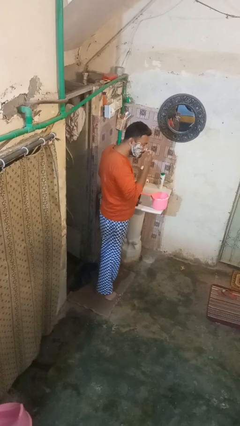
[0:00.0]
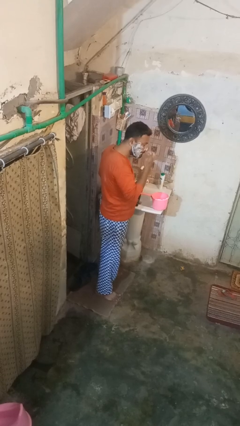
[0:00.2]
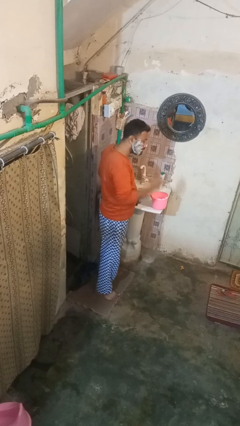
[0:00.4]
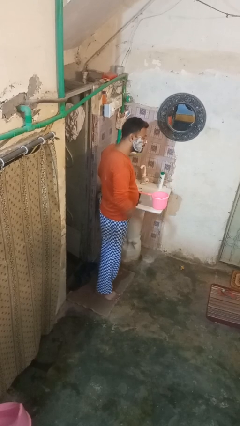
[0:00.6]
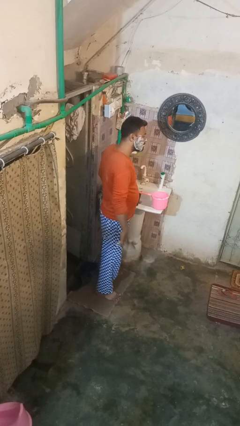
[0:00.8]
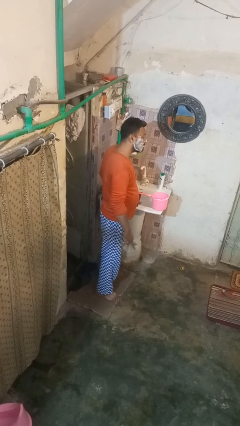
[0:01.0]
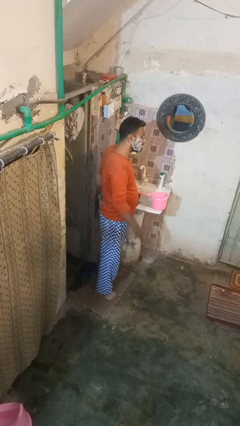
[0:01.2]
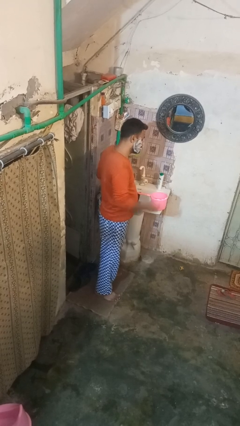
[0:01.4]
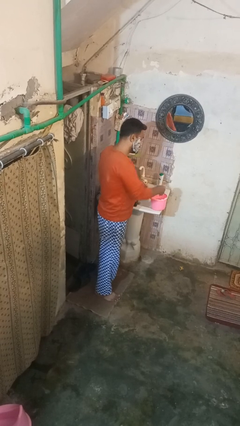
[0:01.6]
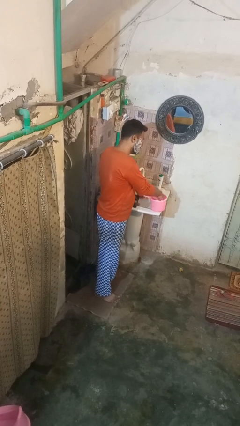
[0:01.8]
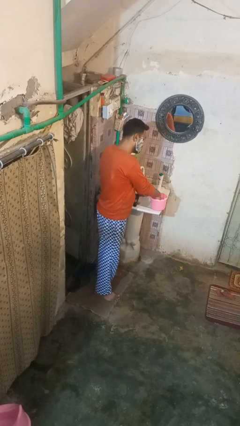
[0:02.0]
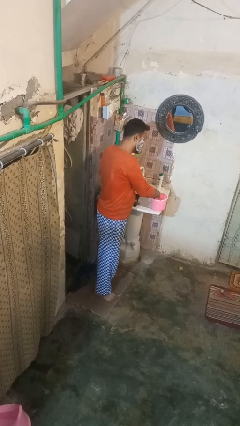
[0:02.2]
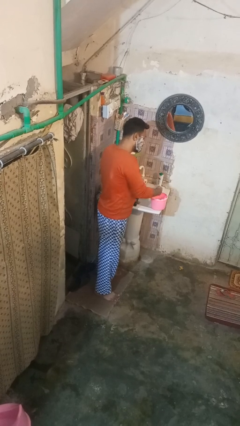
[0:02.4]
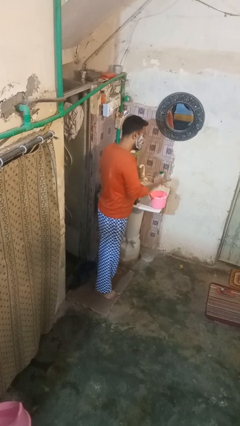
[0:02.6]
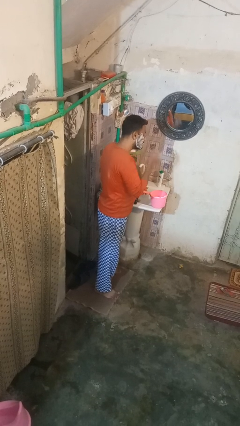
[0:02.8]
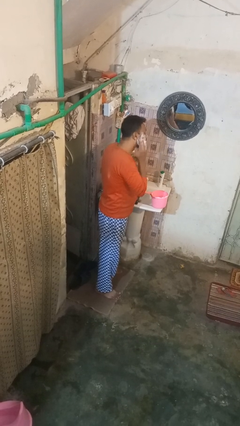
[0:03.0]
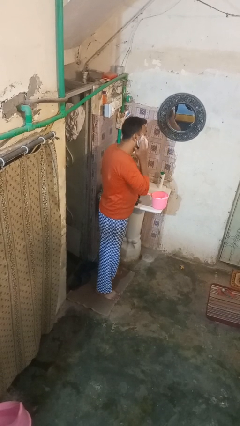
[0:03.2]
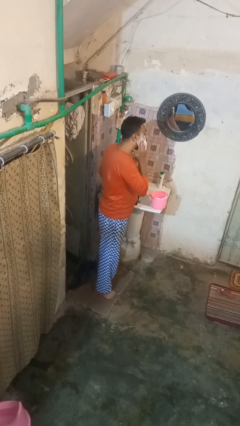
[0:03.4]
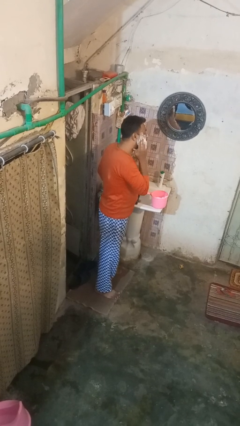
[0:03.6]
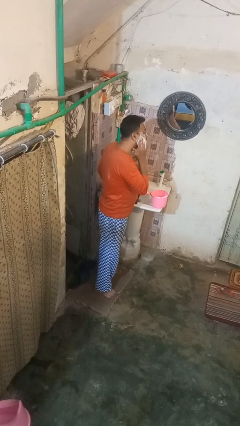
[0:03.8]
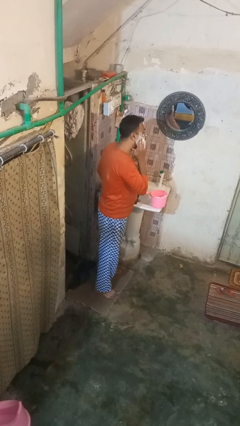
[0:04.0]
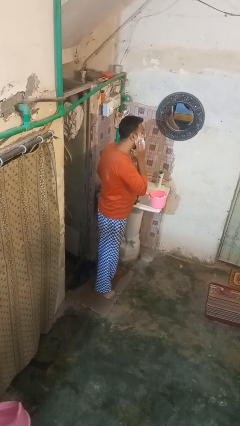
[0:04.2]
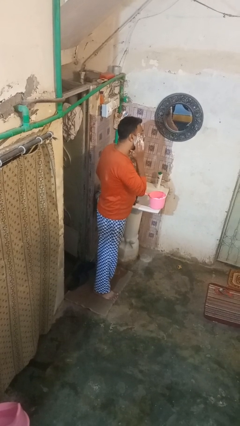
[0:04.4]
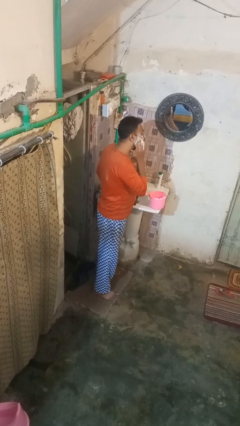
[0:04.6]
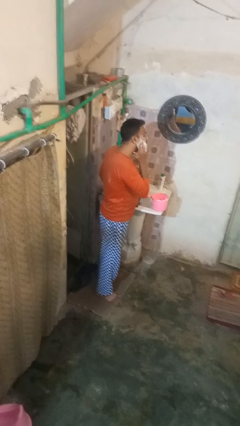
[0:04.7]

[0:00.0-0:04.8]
person applies shaving cream

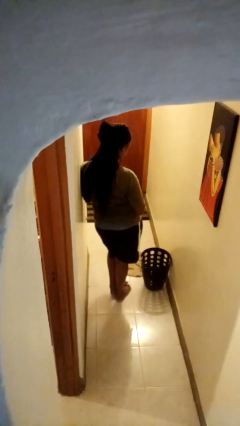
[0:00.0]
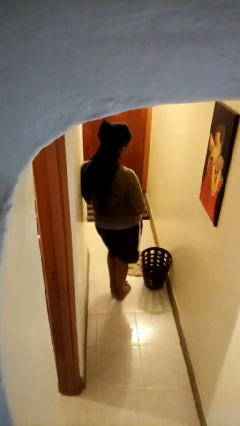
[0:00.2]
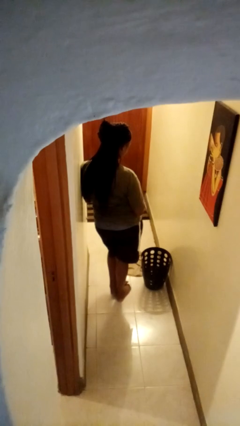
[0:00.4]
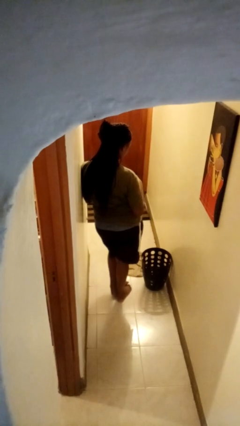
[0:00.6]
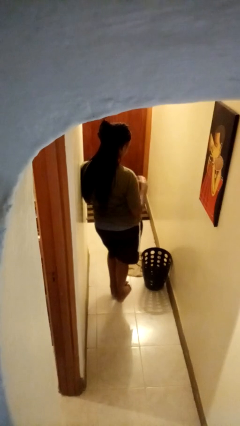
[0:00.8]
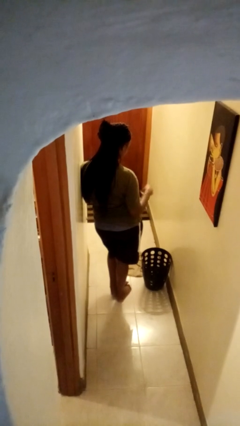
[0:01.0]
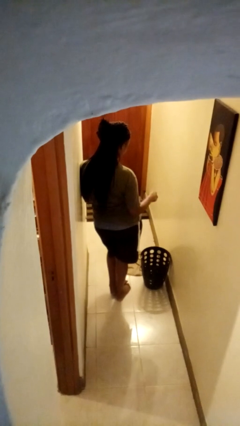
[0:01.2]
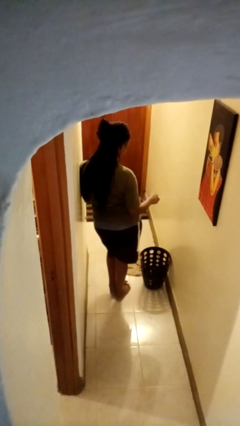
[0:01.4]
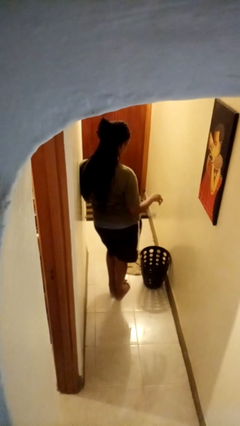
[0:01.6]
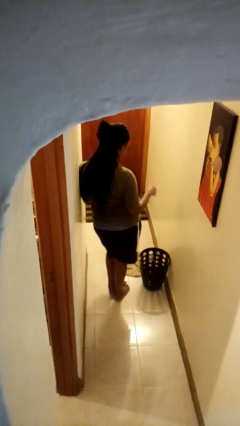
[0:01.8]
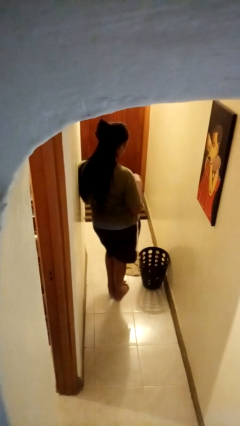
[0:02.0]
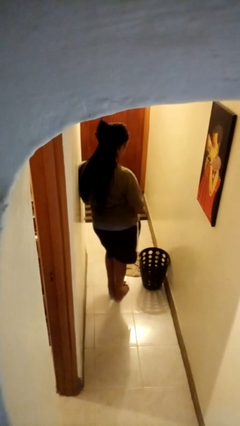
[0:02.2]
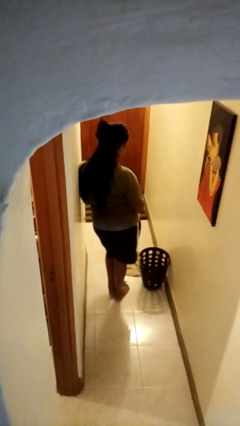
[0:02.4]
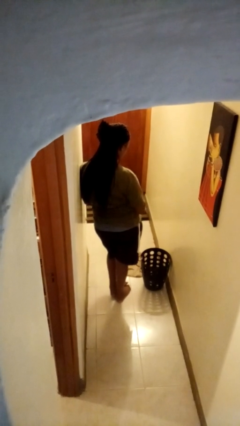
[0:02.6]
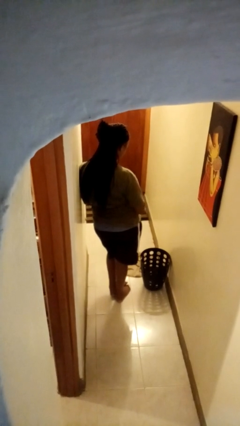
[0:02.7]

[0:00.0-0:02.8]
person discards trash

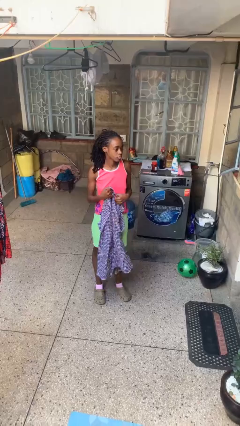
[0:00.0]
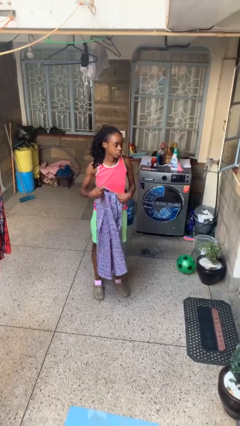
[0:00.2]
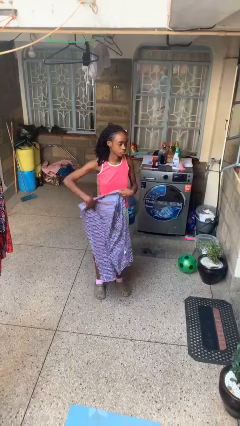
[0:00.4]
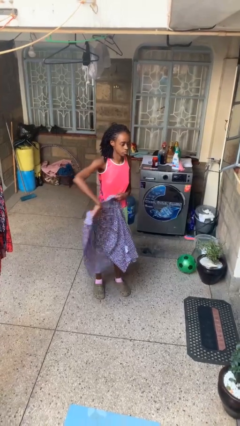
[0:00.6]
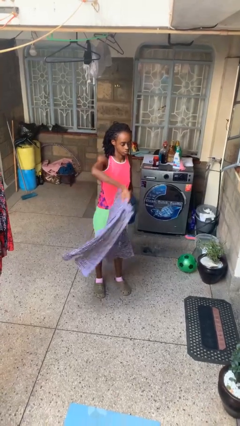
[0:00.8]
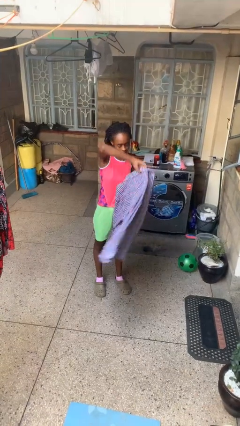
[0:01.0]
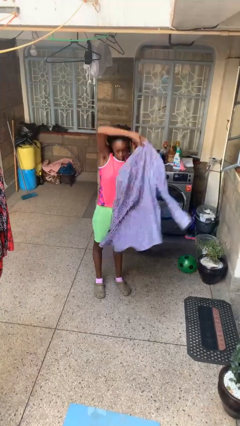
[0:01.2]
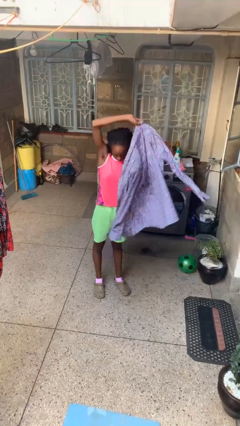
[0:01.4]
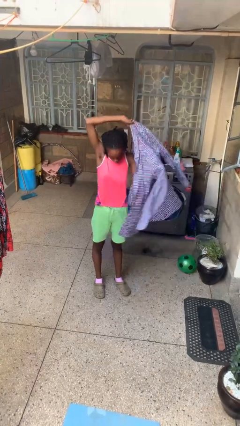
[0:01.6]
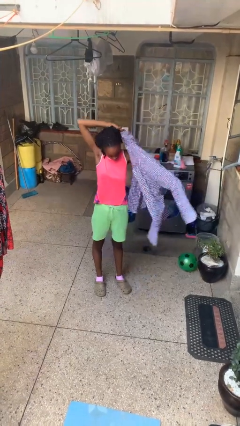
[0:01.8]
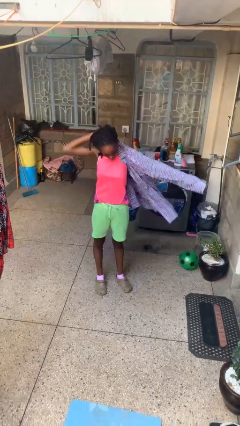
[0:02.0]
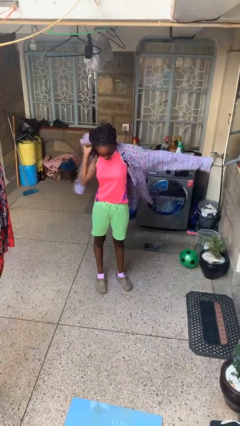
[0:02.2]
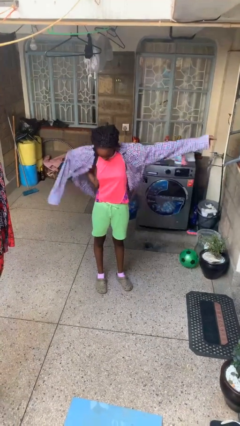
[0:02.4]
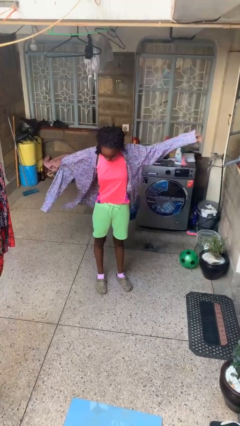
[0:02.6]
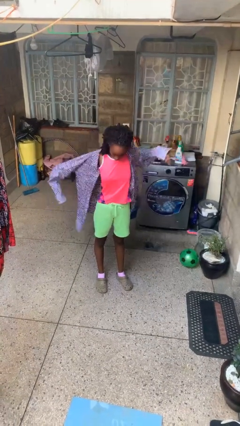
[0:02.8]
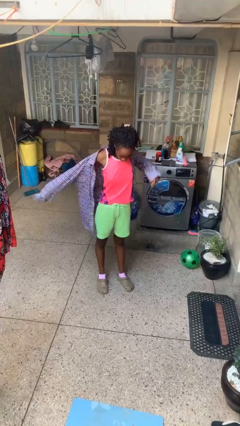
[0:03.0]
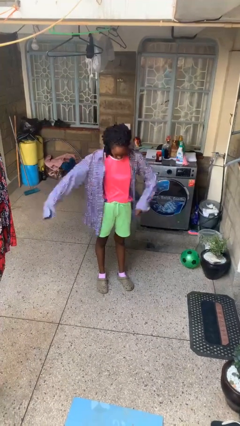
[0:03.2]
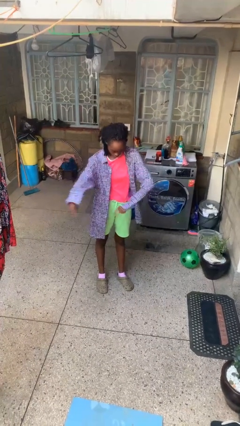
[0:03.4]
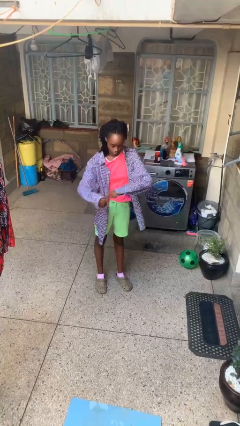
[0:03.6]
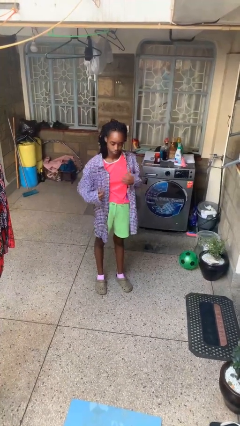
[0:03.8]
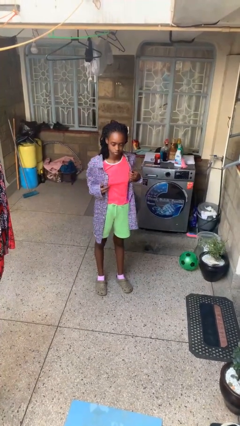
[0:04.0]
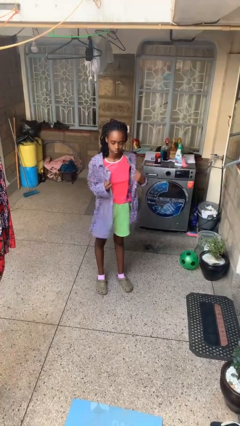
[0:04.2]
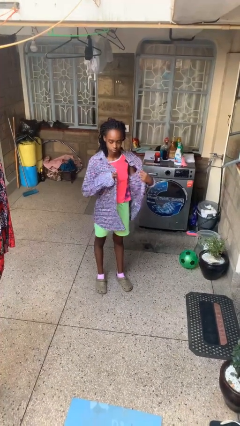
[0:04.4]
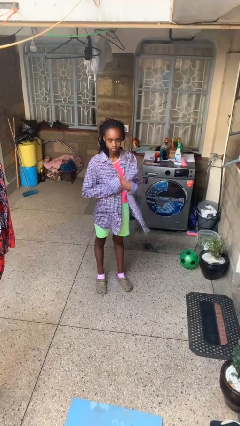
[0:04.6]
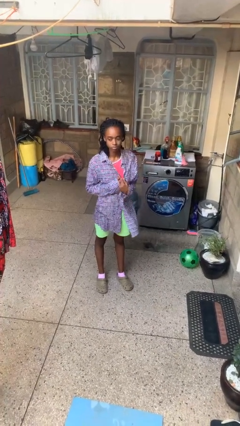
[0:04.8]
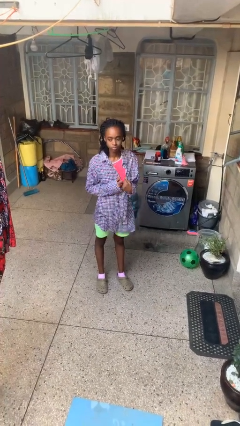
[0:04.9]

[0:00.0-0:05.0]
person puts on shirt

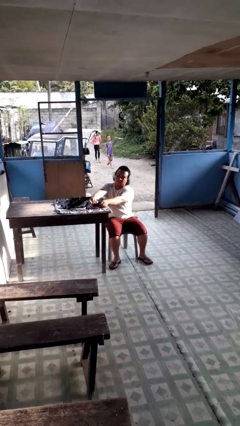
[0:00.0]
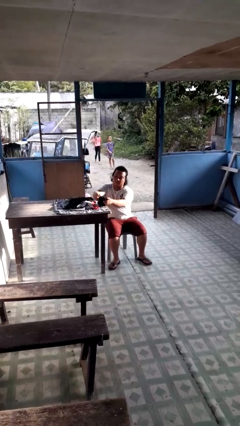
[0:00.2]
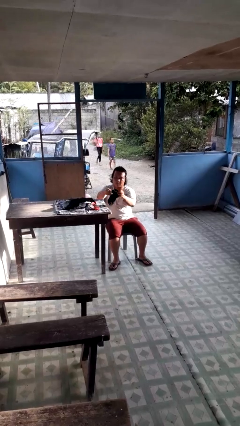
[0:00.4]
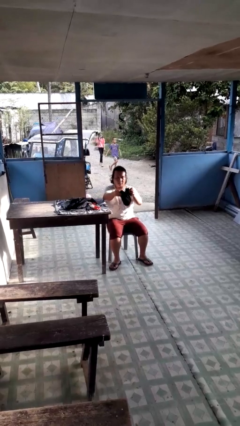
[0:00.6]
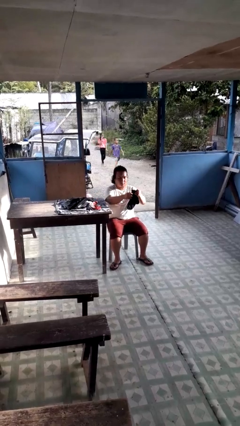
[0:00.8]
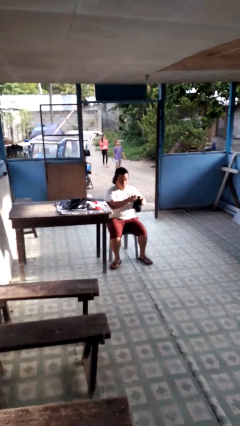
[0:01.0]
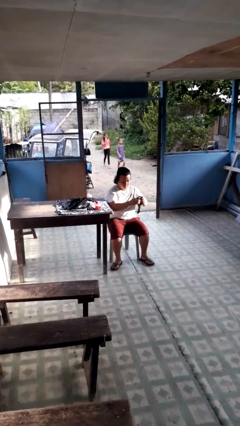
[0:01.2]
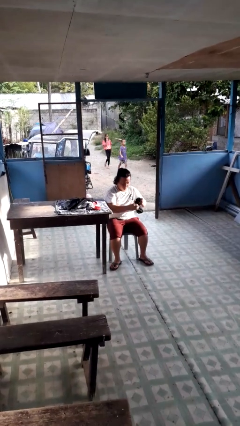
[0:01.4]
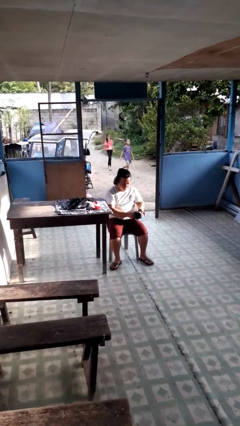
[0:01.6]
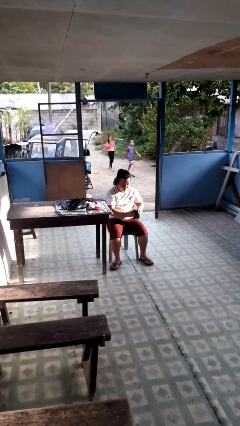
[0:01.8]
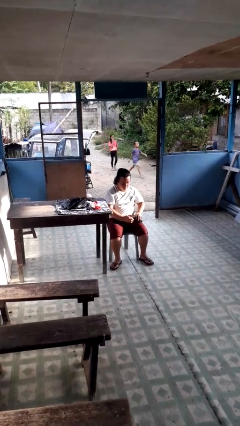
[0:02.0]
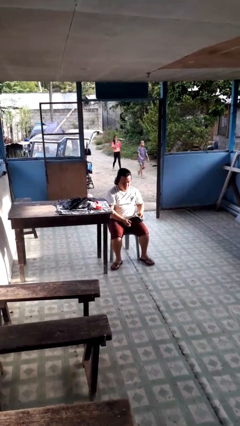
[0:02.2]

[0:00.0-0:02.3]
person folds socks

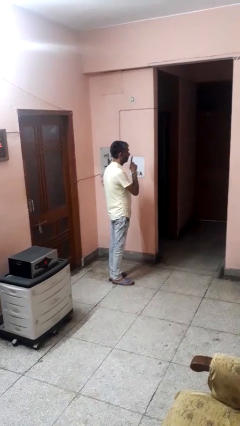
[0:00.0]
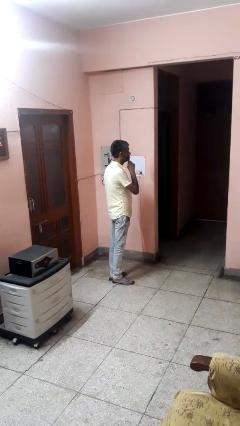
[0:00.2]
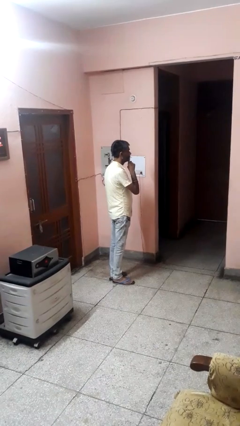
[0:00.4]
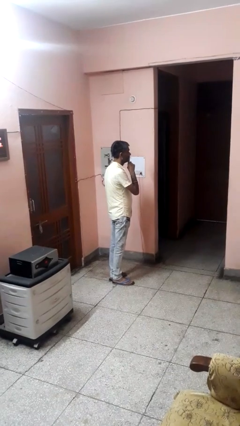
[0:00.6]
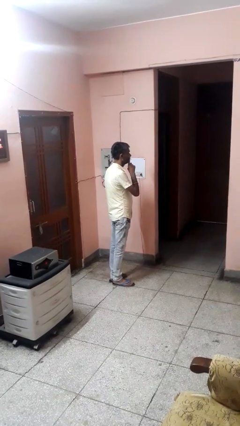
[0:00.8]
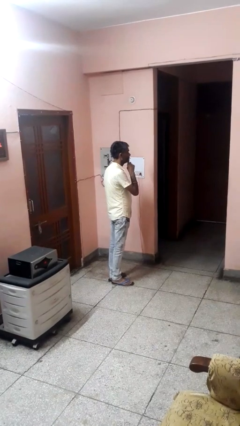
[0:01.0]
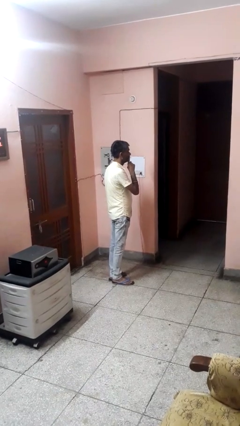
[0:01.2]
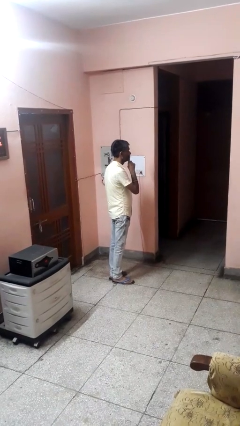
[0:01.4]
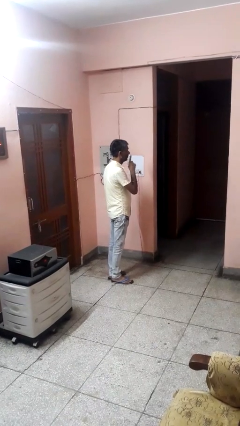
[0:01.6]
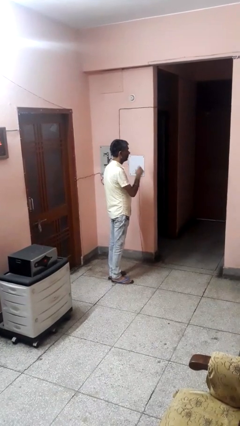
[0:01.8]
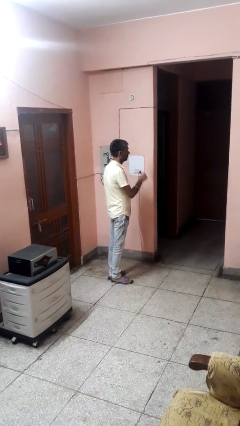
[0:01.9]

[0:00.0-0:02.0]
person gestures be quiet

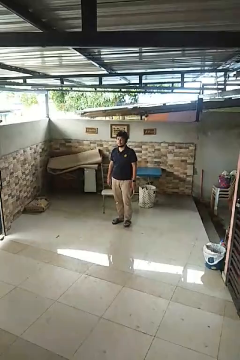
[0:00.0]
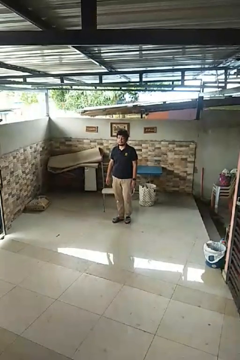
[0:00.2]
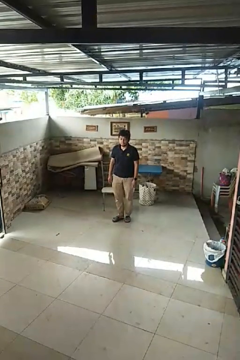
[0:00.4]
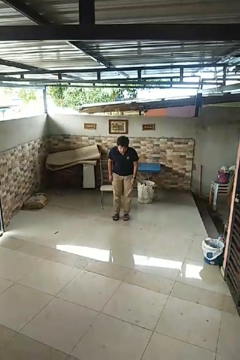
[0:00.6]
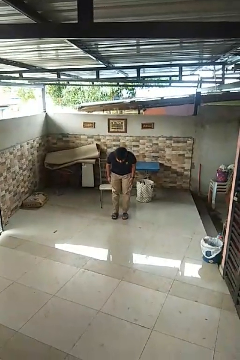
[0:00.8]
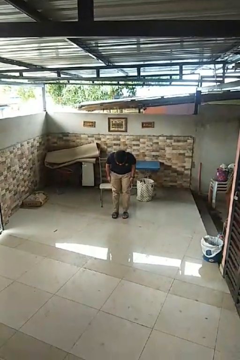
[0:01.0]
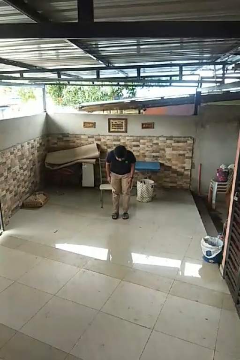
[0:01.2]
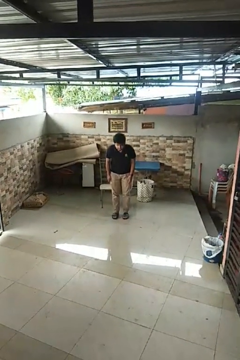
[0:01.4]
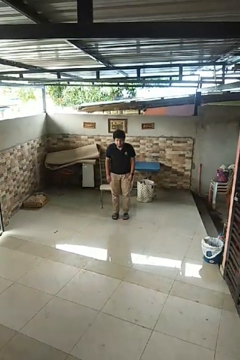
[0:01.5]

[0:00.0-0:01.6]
person bows
